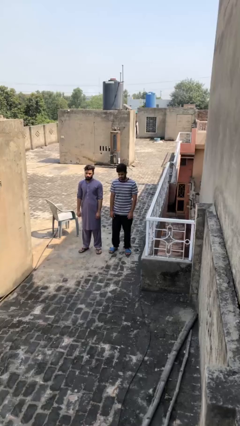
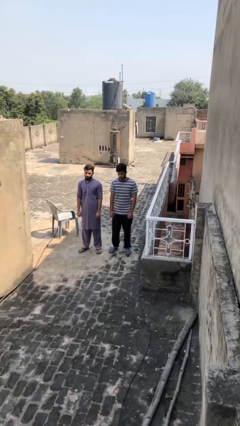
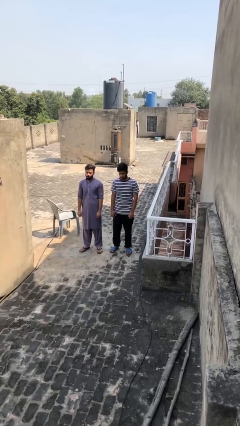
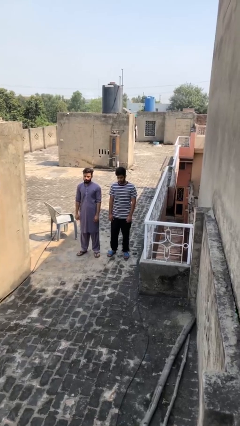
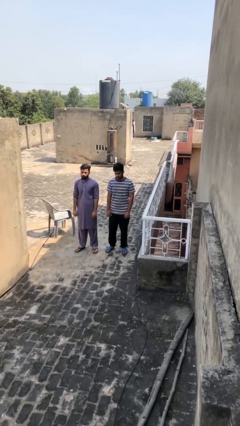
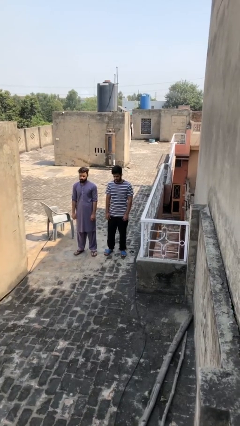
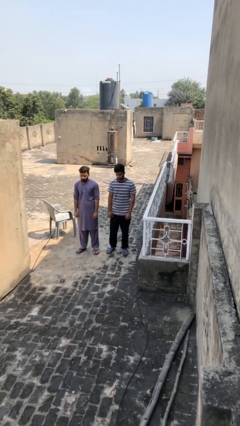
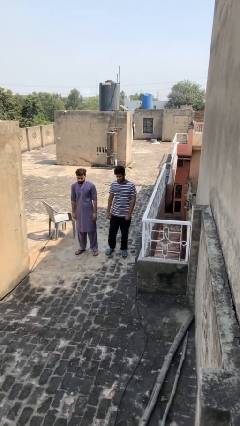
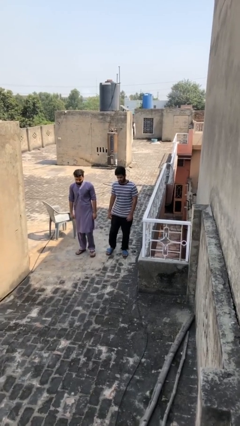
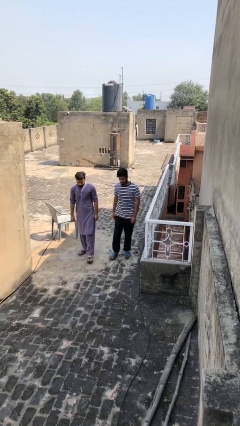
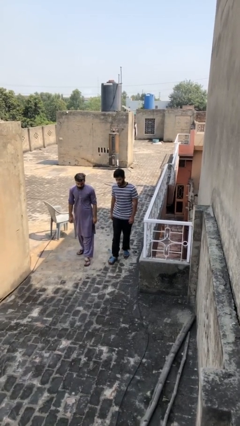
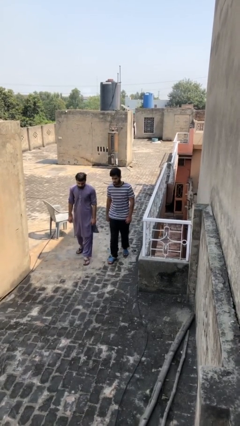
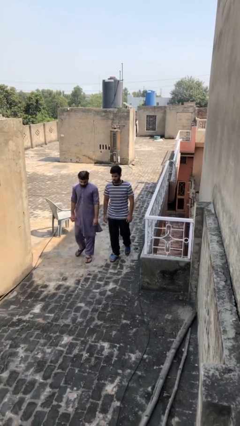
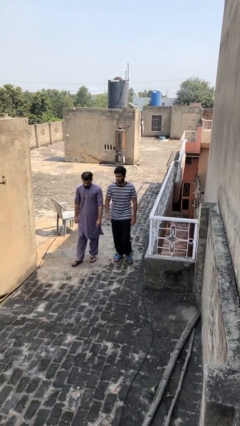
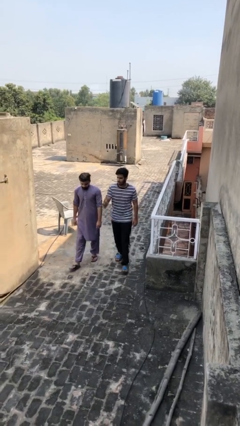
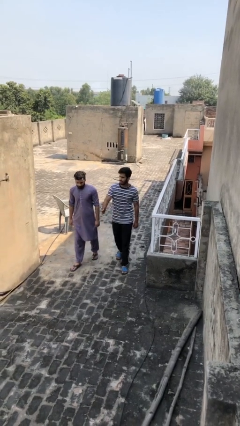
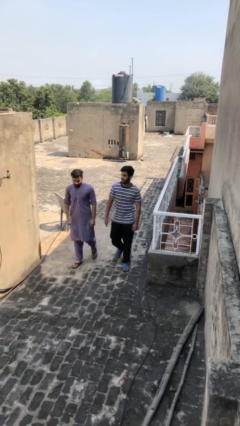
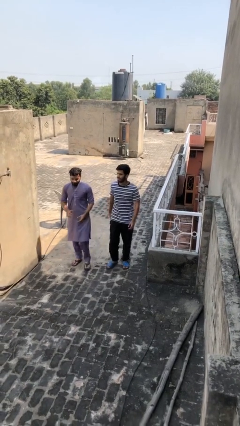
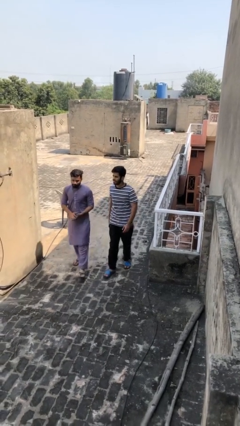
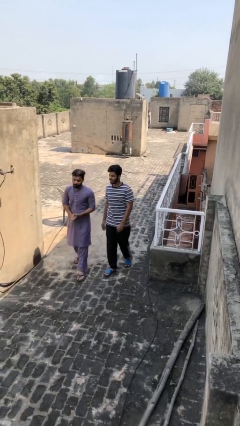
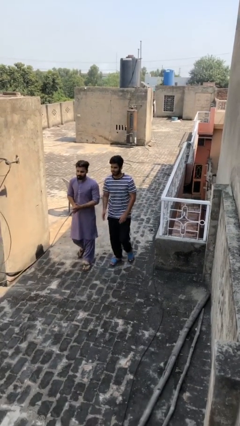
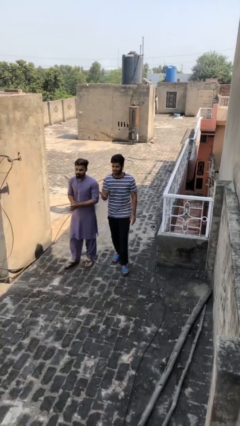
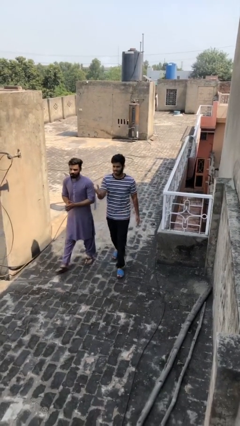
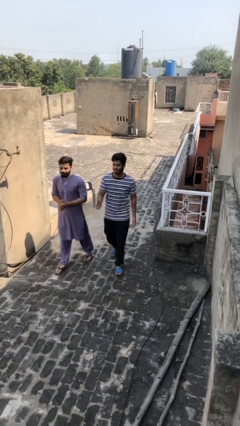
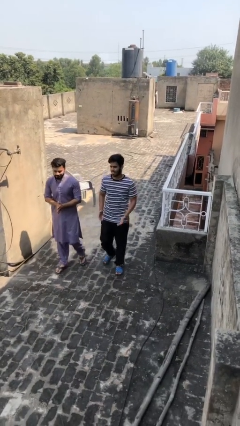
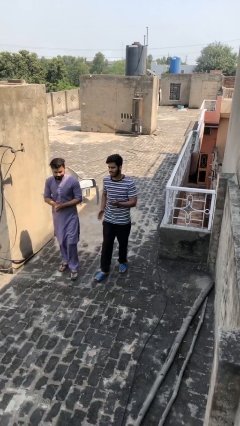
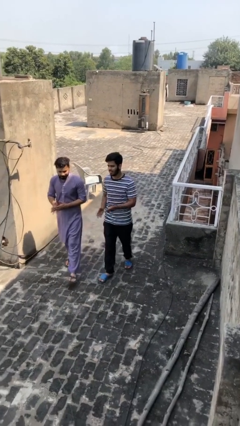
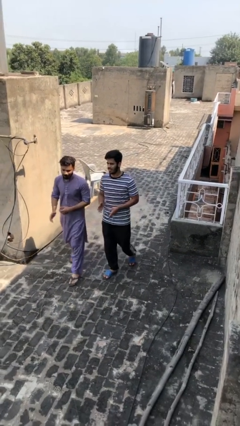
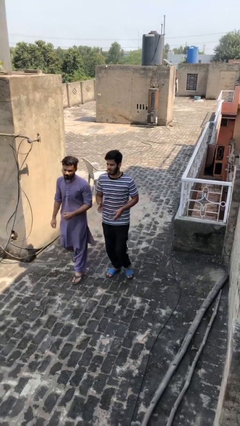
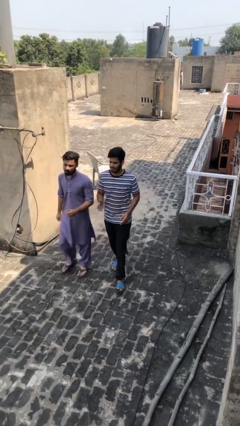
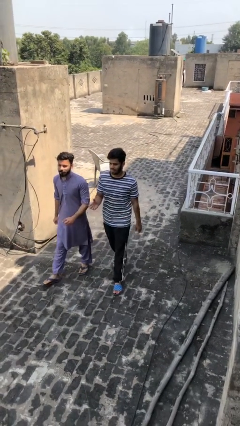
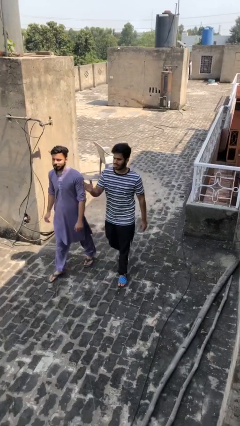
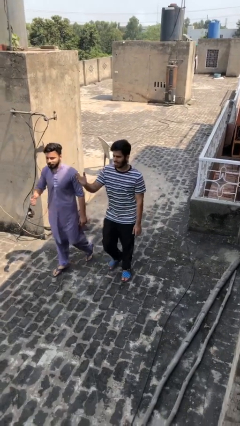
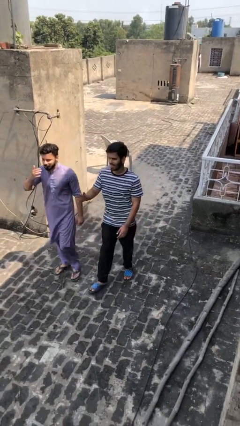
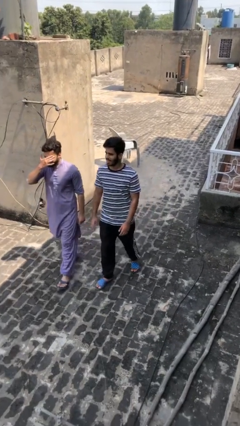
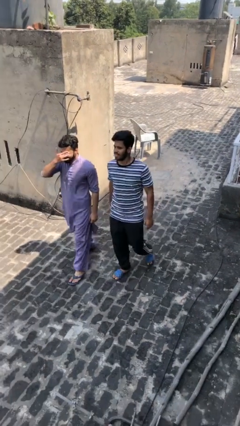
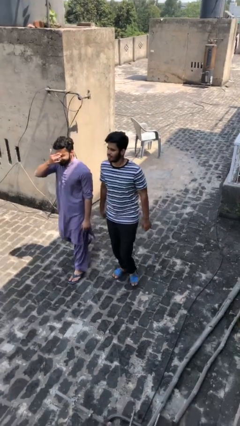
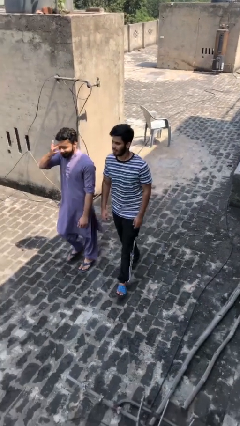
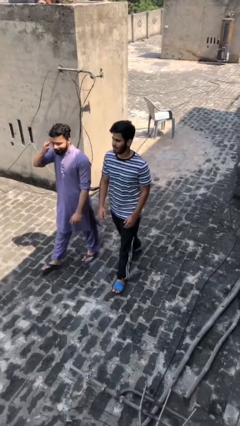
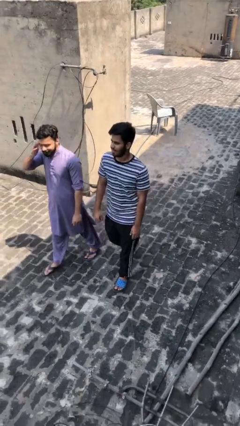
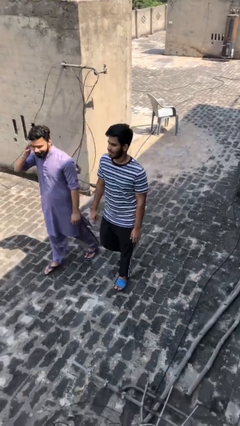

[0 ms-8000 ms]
person talks to person

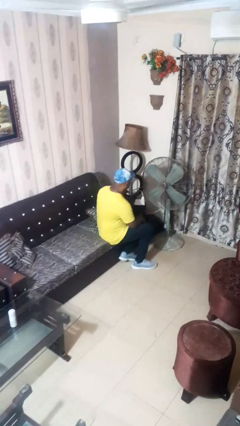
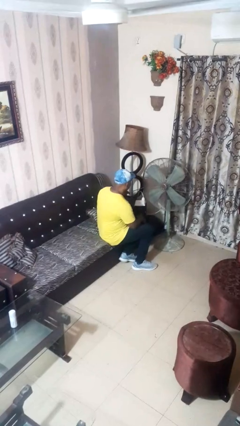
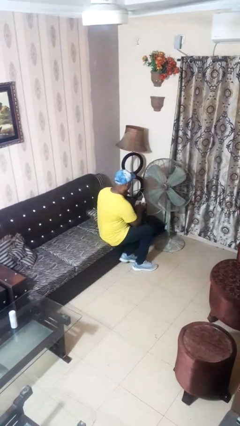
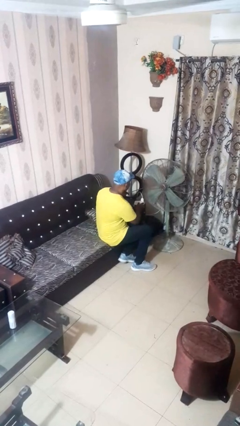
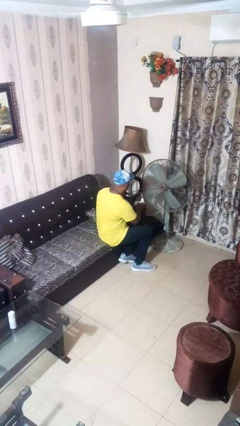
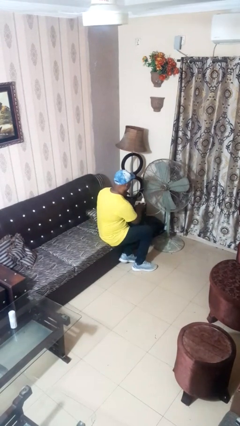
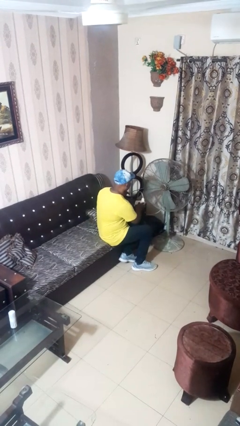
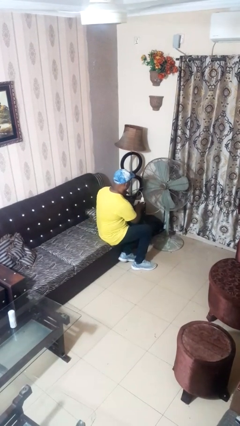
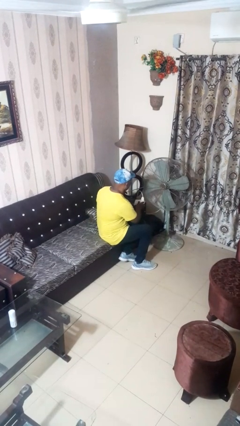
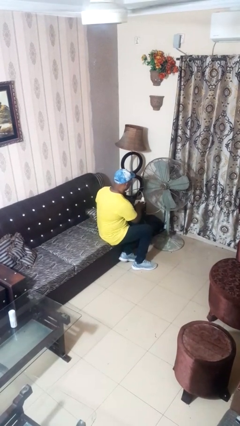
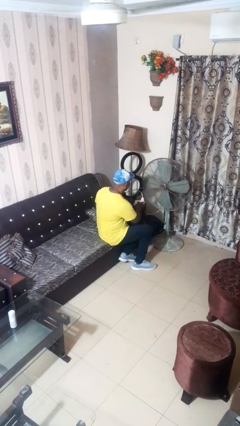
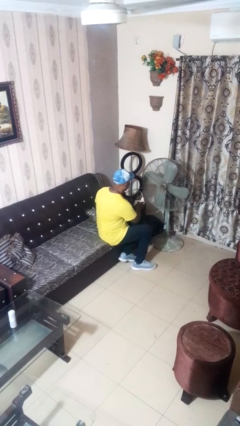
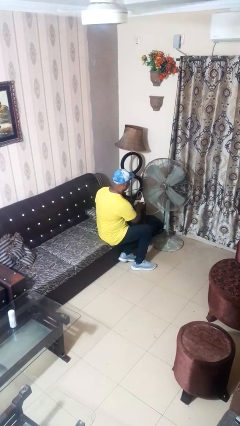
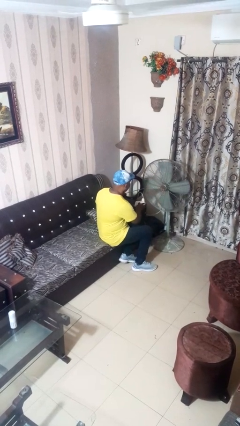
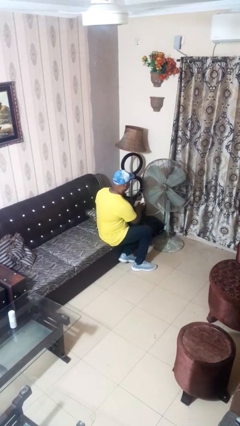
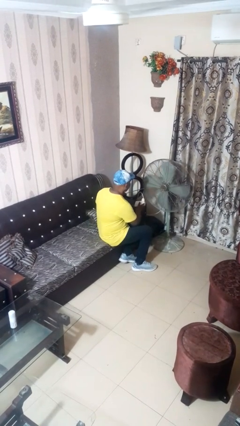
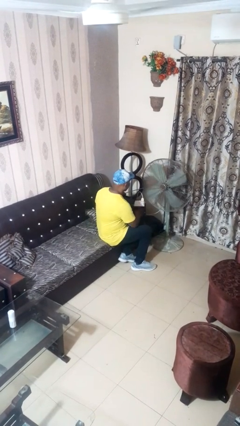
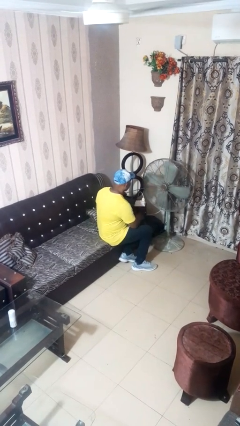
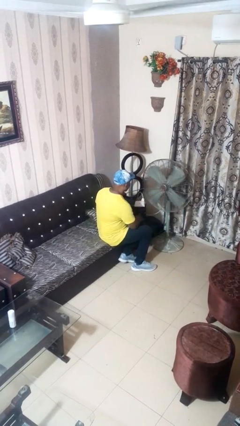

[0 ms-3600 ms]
person turns on fan

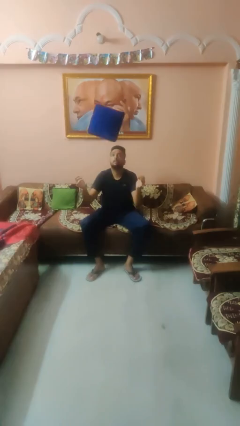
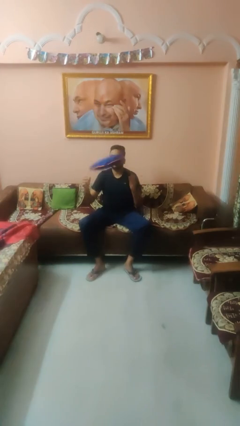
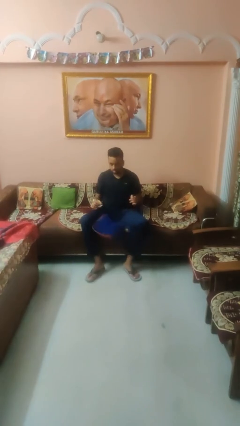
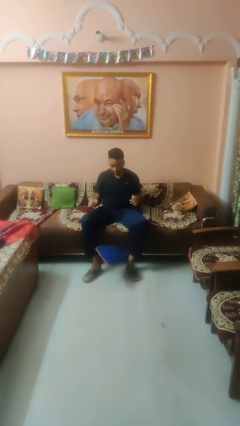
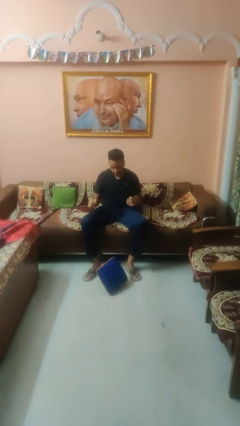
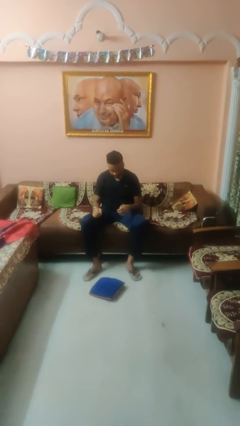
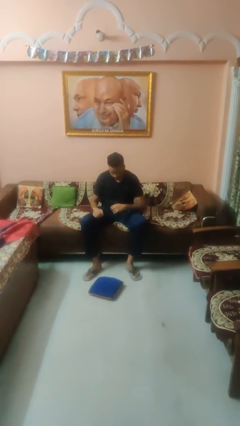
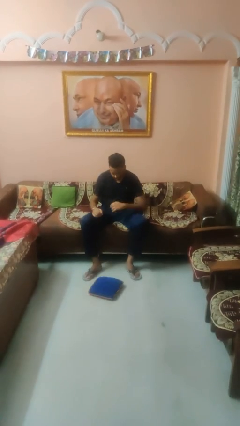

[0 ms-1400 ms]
person throws object into air

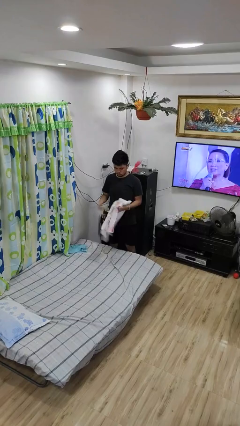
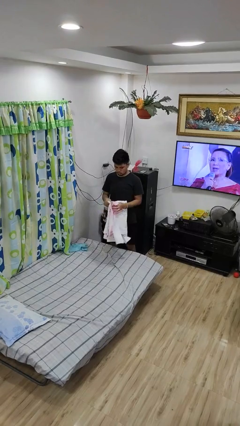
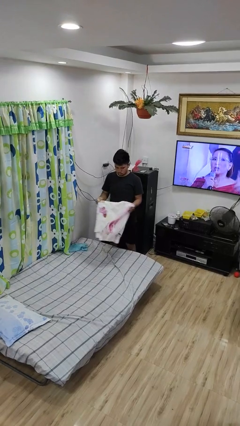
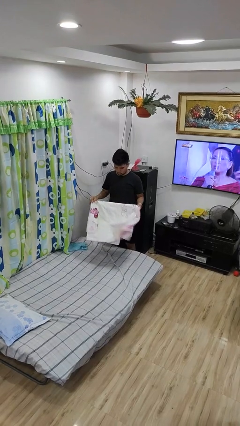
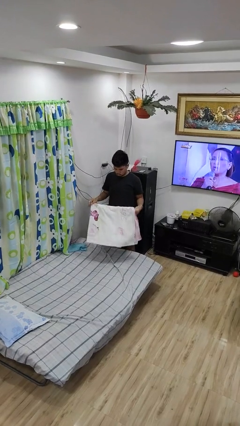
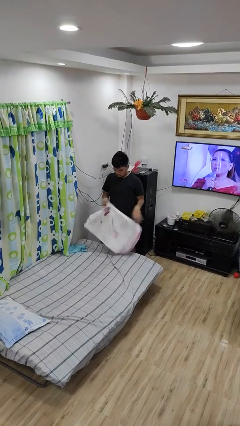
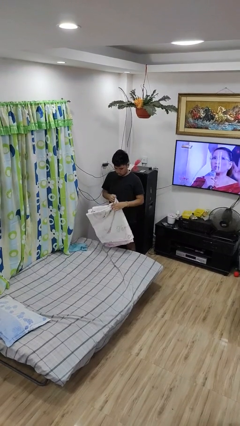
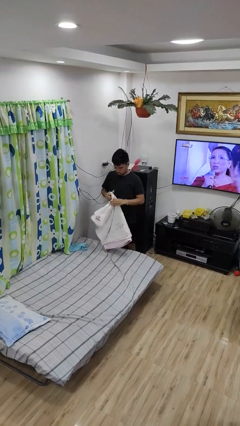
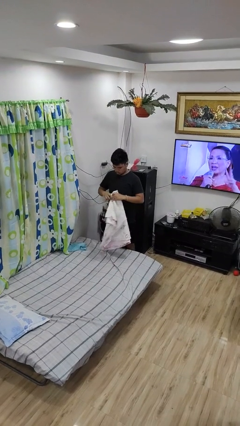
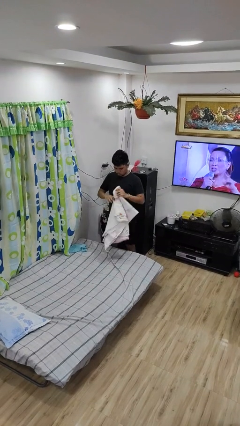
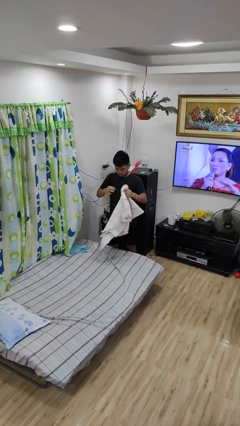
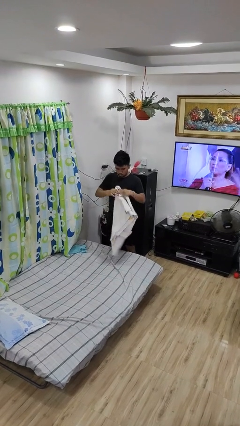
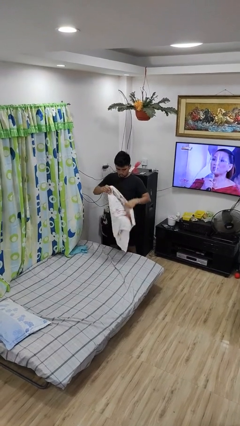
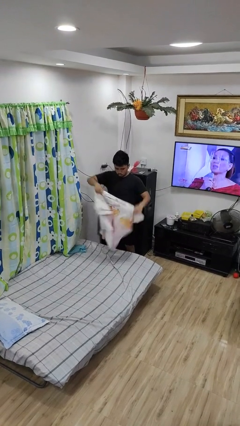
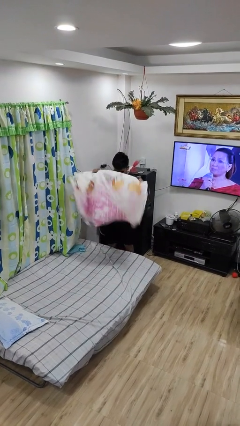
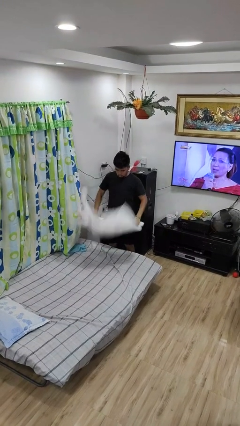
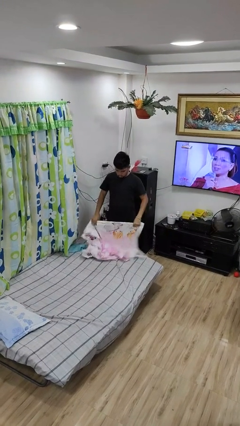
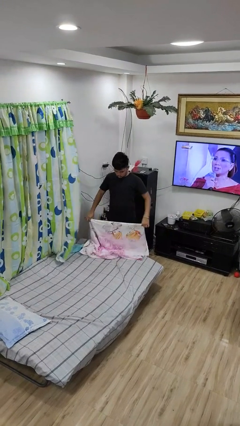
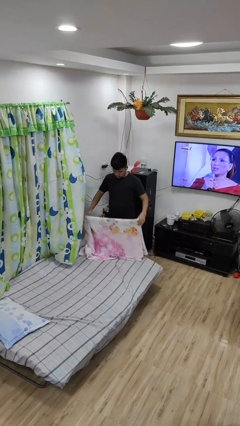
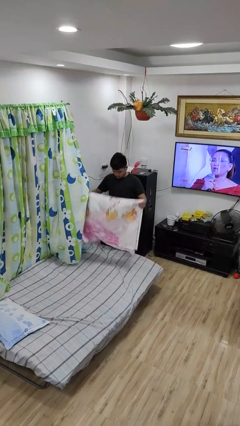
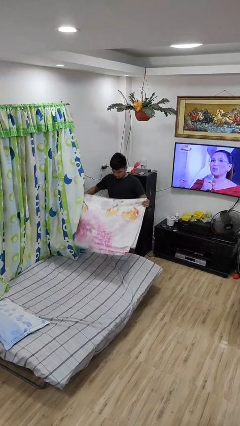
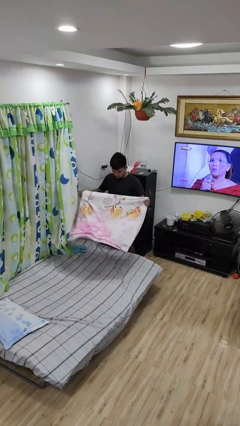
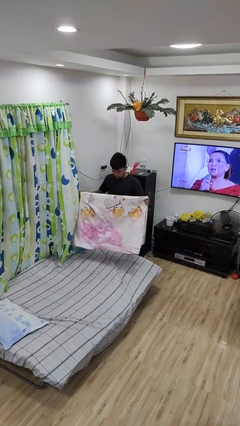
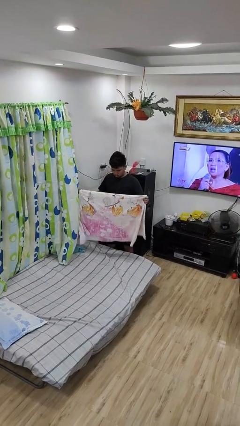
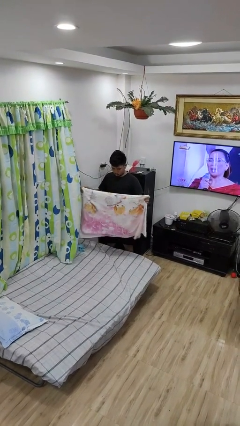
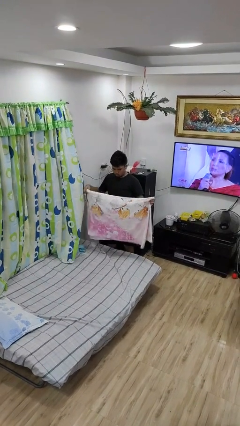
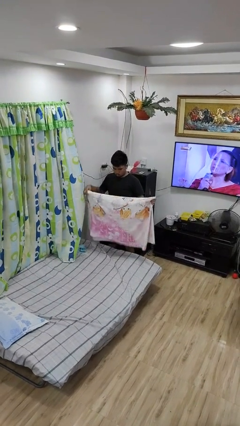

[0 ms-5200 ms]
person unfolds blanket
